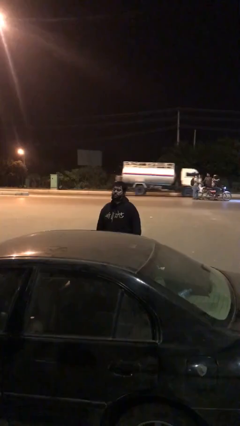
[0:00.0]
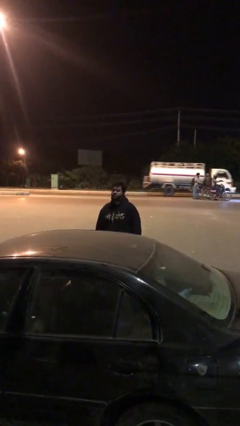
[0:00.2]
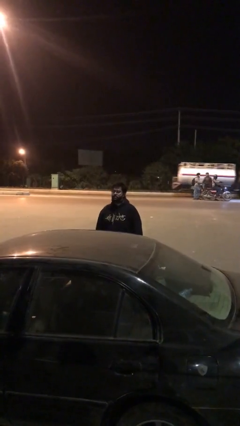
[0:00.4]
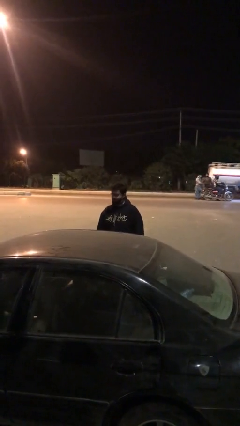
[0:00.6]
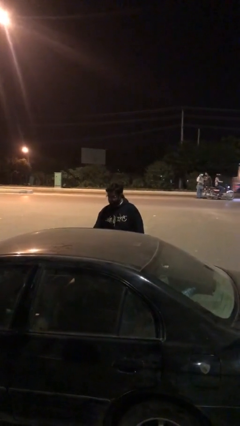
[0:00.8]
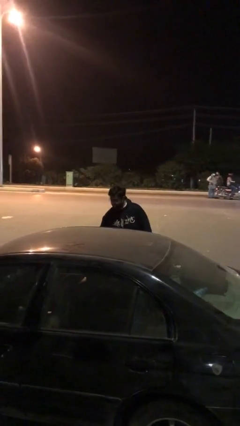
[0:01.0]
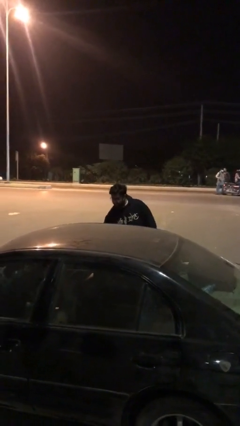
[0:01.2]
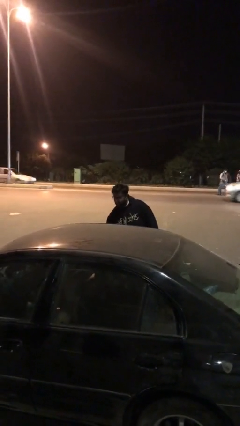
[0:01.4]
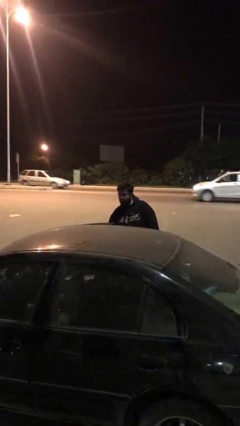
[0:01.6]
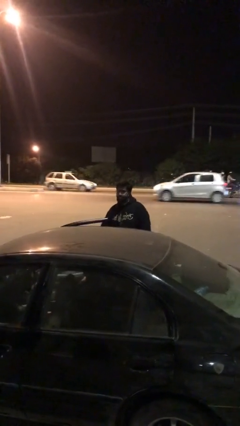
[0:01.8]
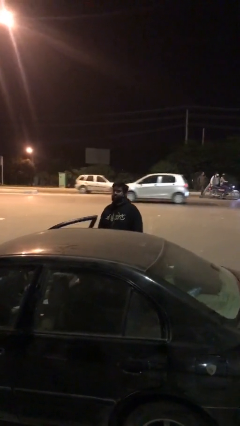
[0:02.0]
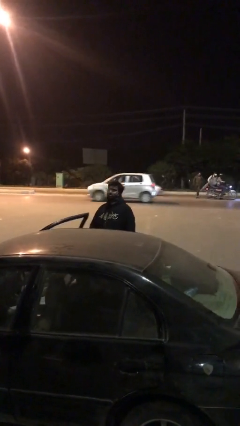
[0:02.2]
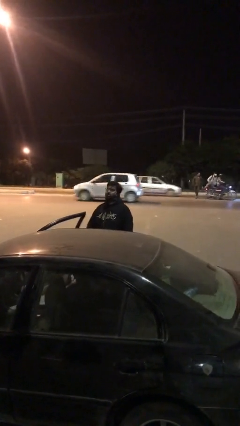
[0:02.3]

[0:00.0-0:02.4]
person opens car door

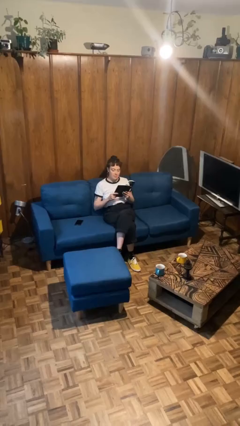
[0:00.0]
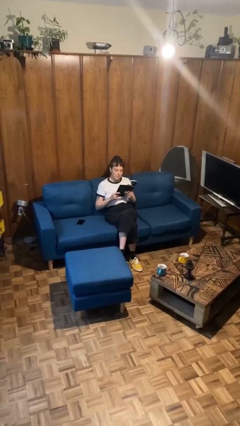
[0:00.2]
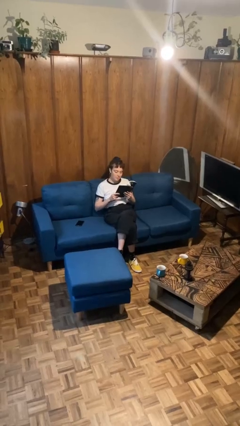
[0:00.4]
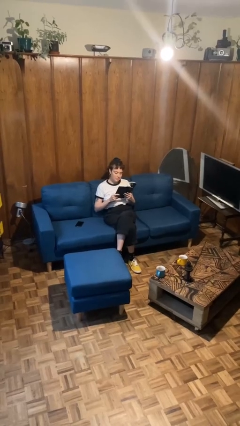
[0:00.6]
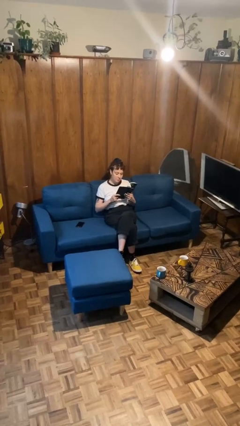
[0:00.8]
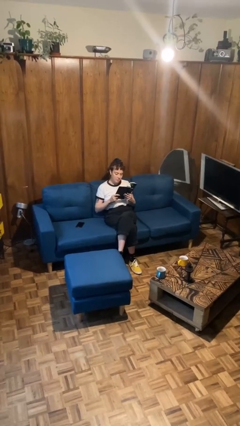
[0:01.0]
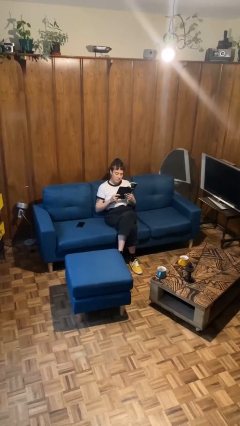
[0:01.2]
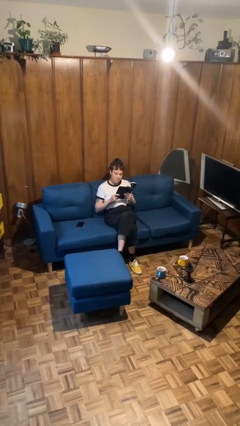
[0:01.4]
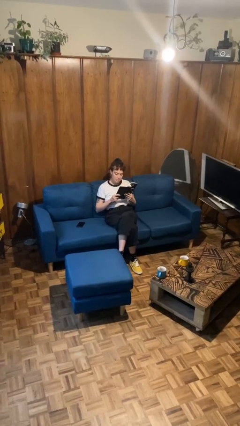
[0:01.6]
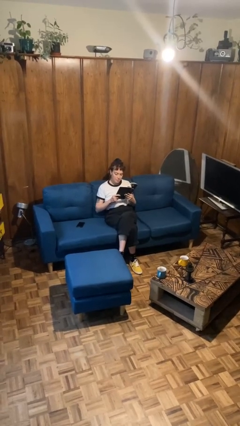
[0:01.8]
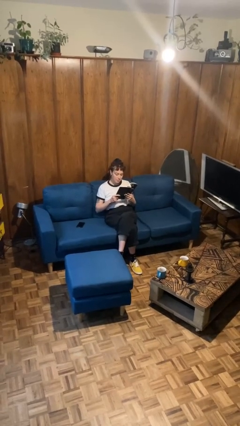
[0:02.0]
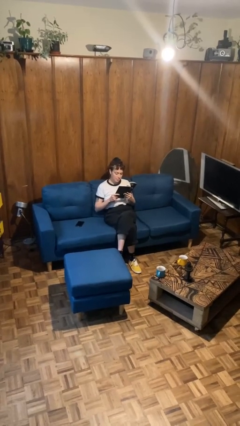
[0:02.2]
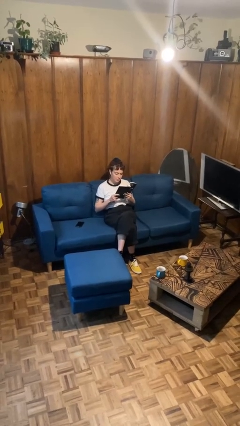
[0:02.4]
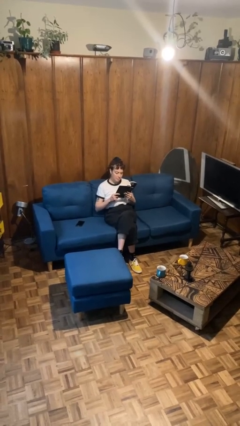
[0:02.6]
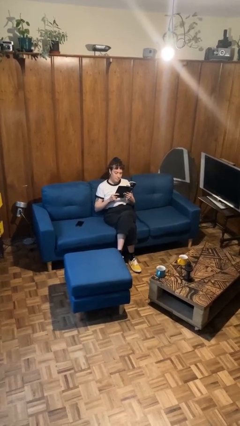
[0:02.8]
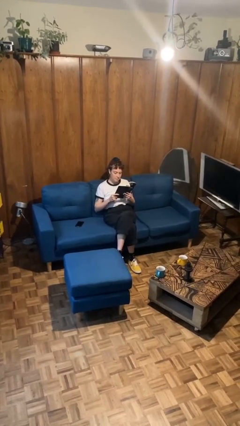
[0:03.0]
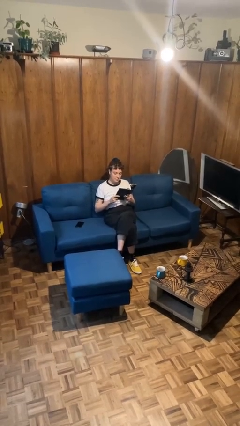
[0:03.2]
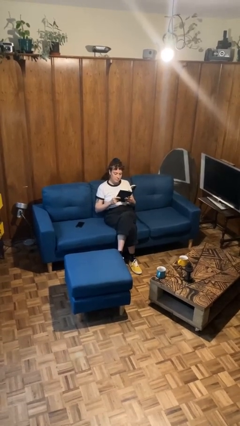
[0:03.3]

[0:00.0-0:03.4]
person reads document

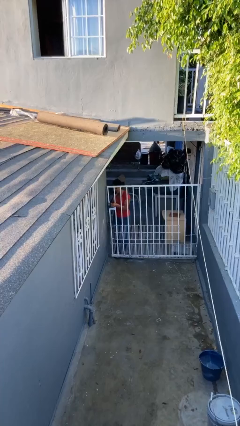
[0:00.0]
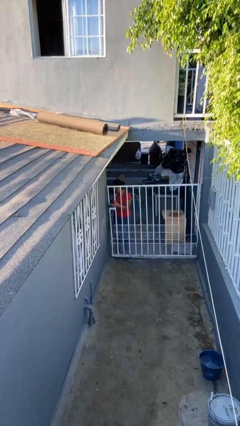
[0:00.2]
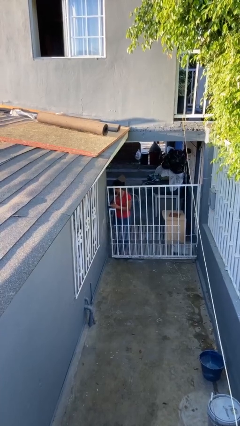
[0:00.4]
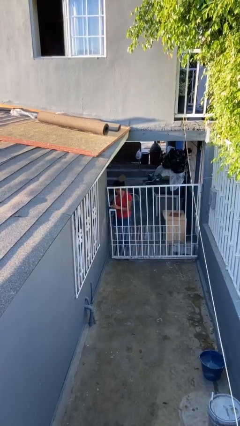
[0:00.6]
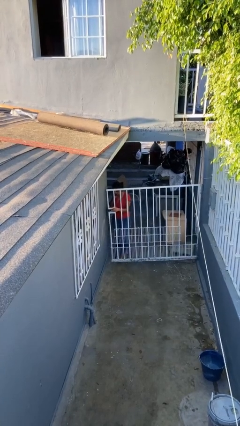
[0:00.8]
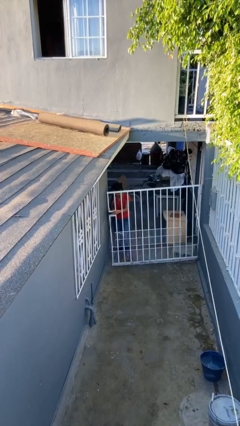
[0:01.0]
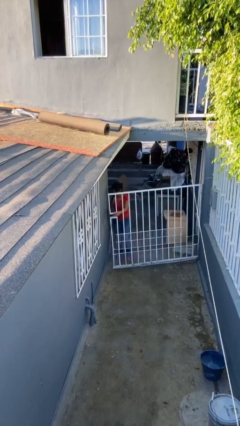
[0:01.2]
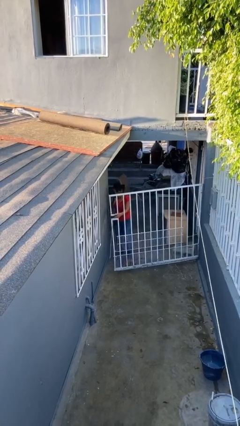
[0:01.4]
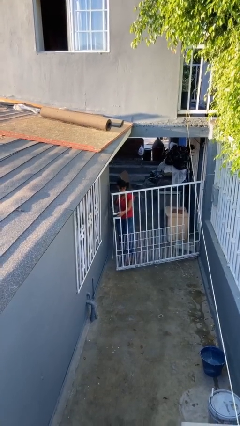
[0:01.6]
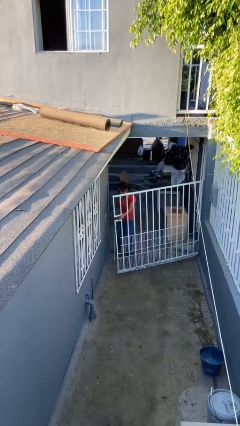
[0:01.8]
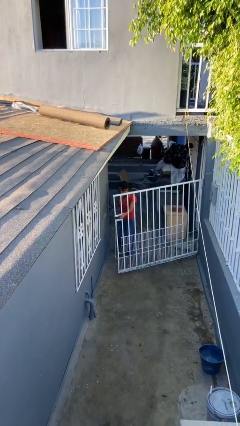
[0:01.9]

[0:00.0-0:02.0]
person opens facility door

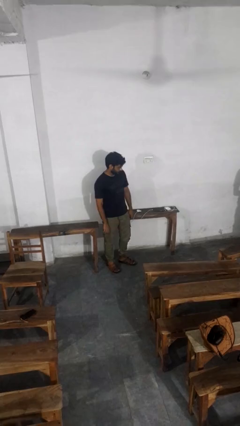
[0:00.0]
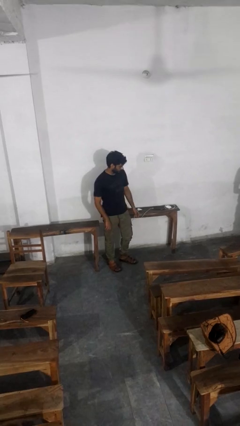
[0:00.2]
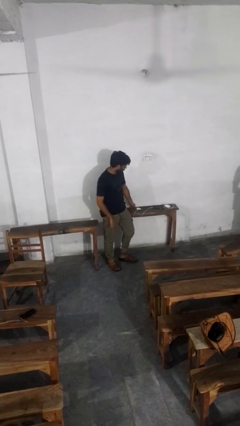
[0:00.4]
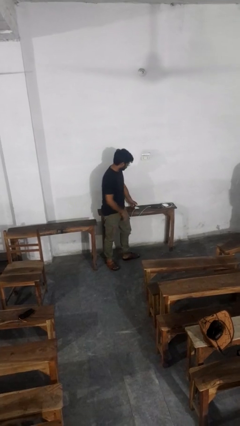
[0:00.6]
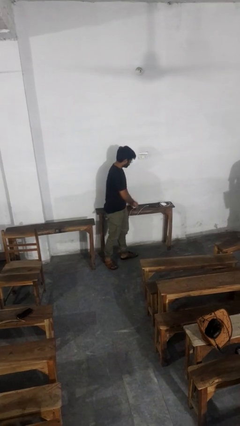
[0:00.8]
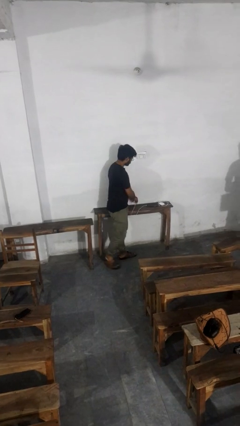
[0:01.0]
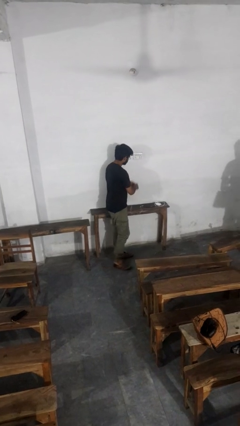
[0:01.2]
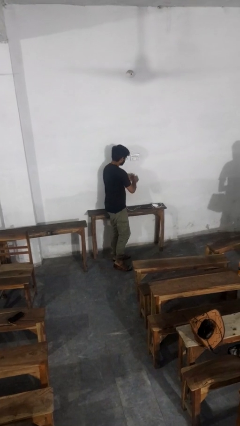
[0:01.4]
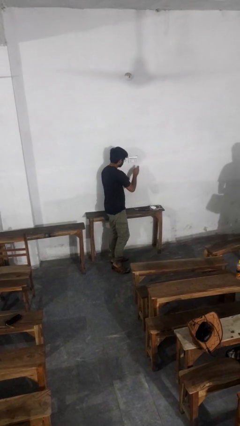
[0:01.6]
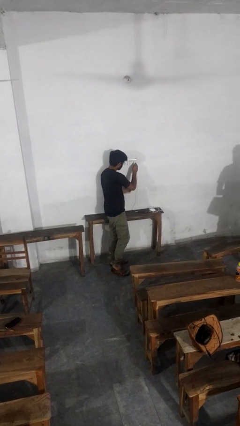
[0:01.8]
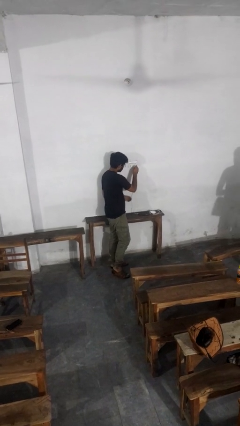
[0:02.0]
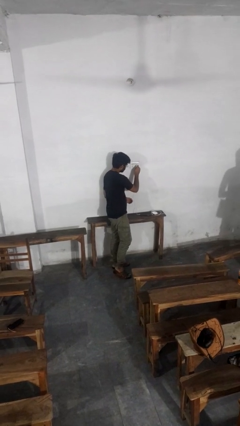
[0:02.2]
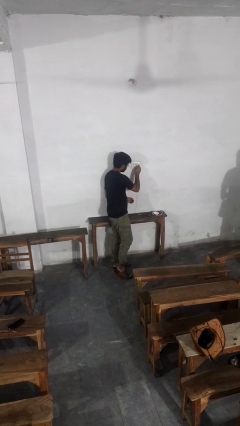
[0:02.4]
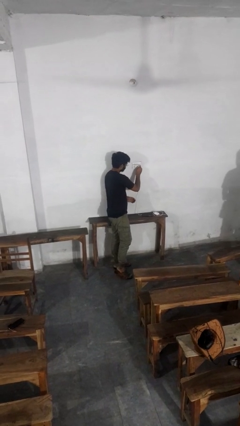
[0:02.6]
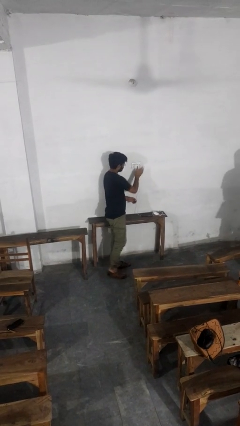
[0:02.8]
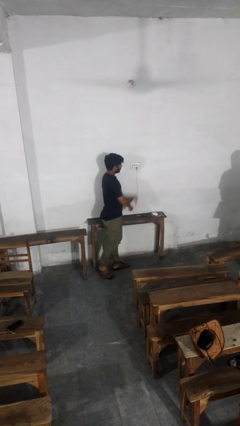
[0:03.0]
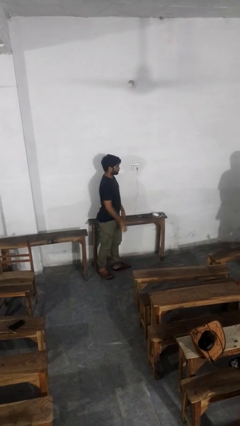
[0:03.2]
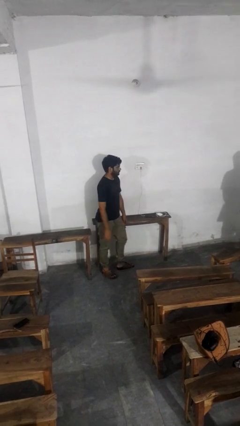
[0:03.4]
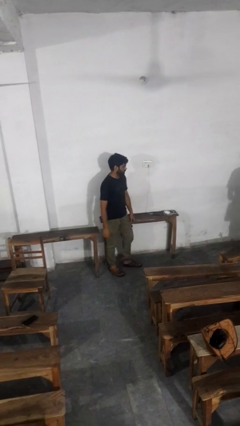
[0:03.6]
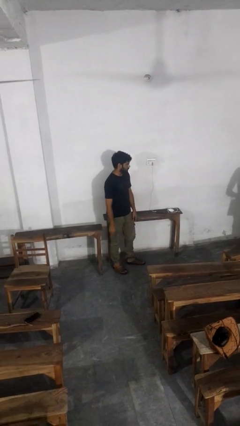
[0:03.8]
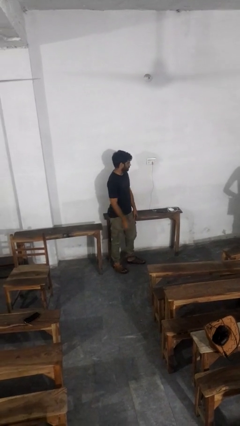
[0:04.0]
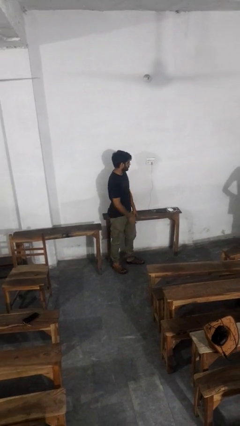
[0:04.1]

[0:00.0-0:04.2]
person plugs into electrical socket

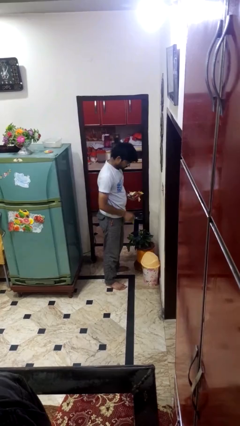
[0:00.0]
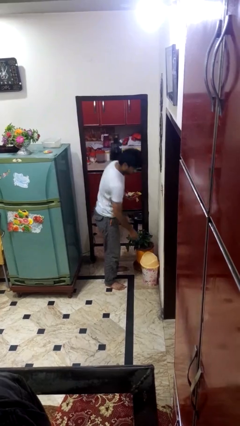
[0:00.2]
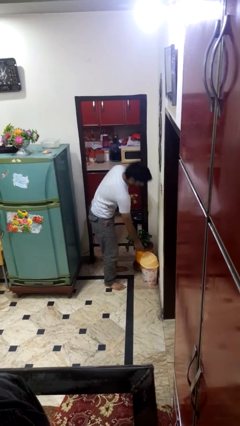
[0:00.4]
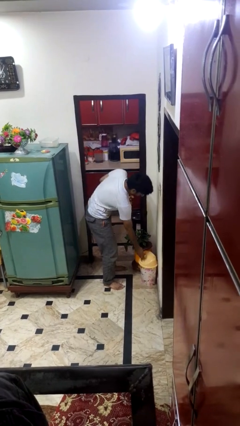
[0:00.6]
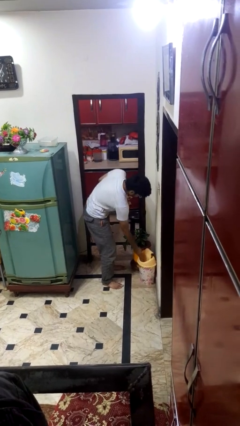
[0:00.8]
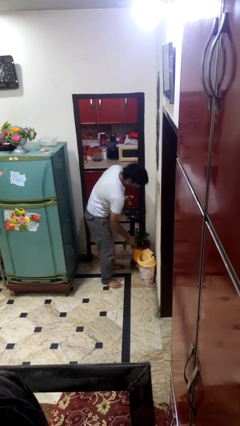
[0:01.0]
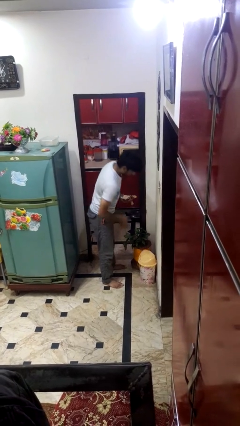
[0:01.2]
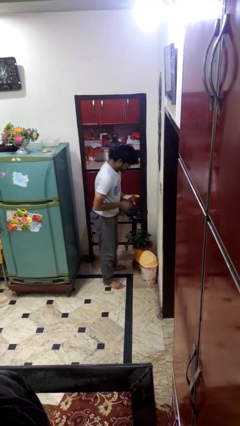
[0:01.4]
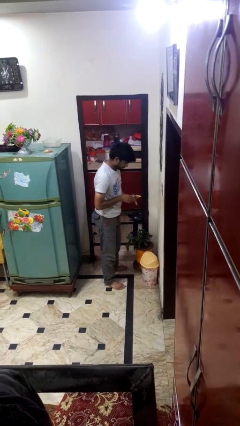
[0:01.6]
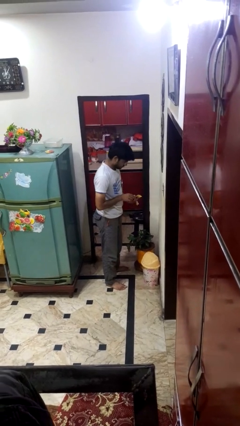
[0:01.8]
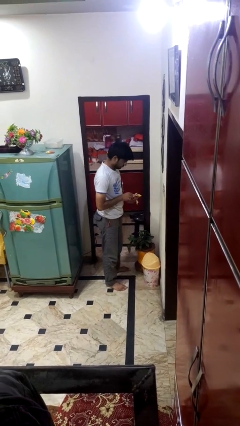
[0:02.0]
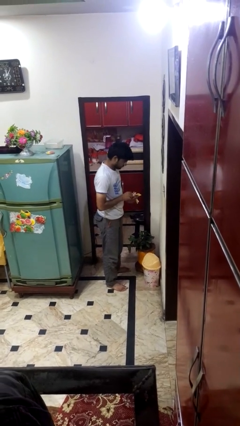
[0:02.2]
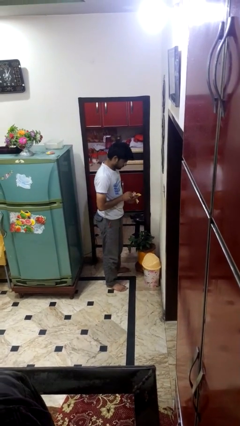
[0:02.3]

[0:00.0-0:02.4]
person discards trash

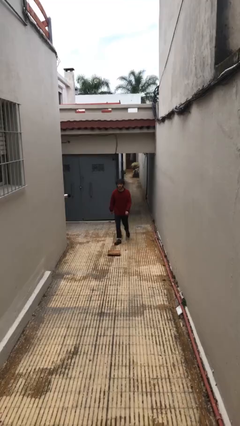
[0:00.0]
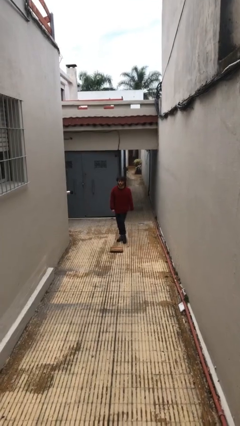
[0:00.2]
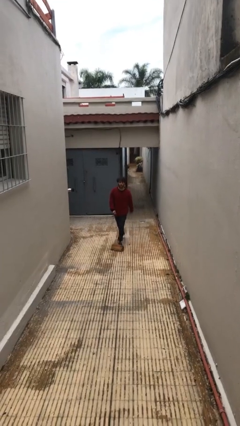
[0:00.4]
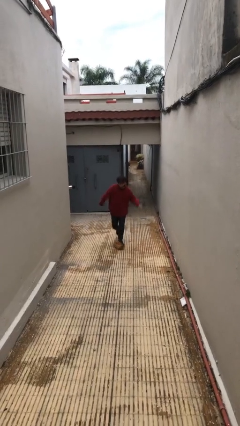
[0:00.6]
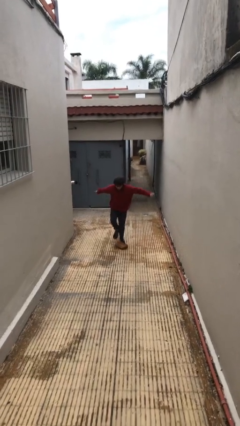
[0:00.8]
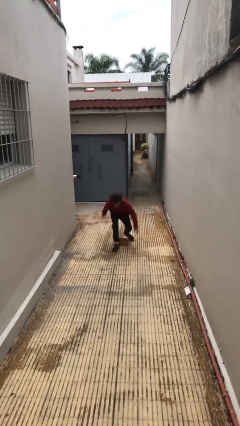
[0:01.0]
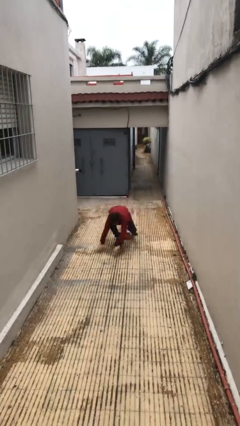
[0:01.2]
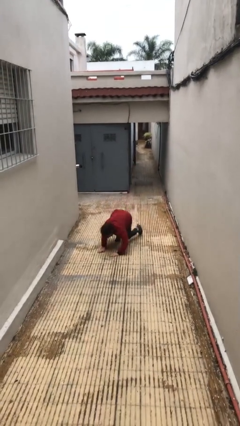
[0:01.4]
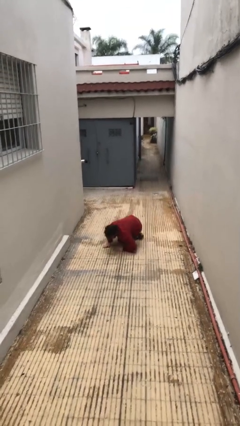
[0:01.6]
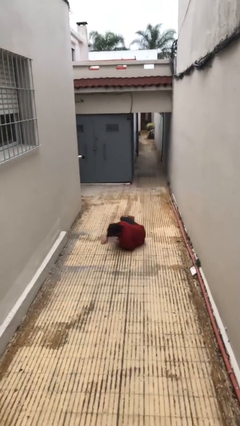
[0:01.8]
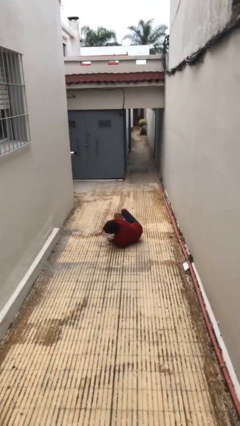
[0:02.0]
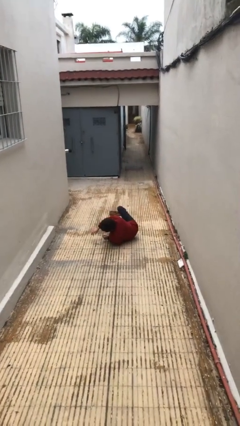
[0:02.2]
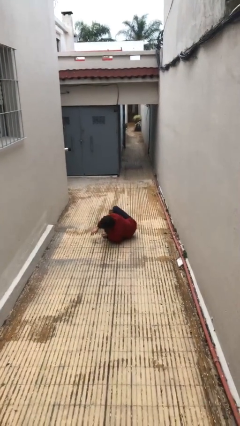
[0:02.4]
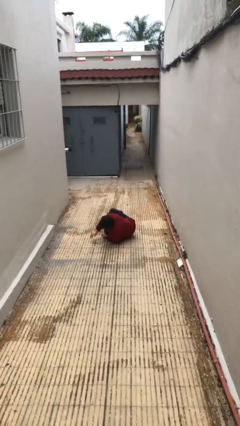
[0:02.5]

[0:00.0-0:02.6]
person trips on object on floor
